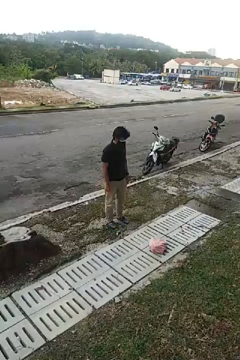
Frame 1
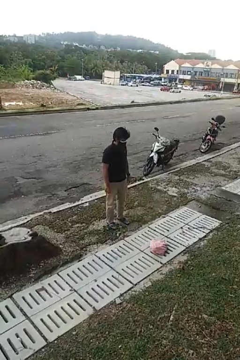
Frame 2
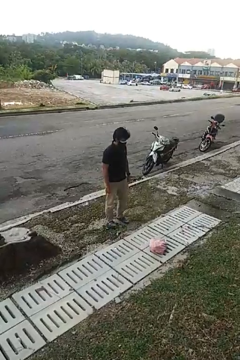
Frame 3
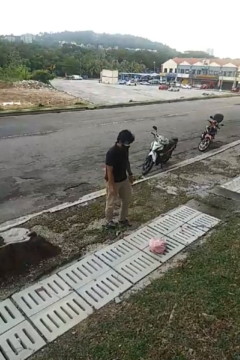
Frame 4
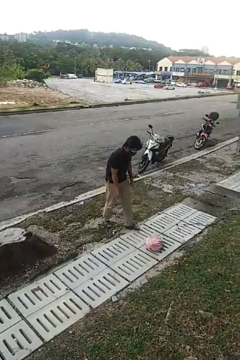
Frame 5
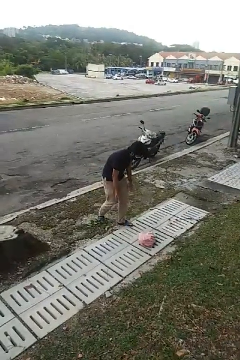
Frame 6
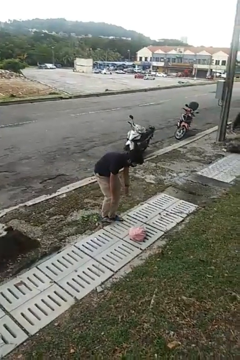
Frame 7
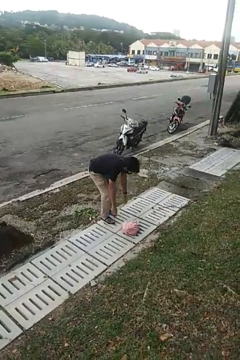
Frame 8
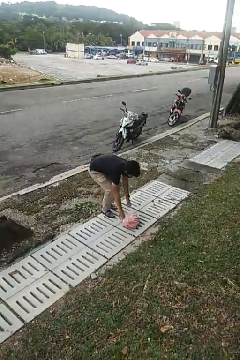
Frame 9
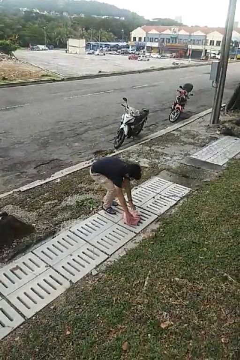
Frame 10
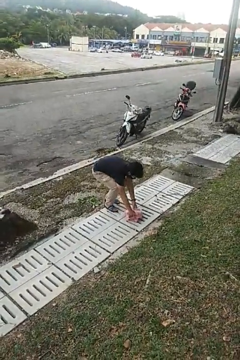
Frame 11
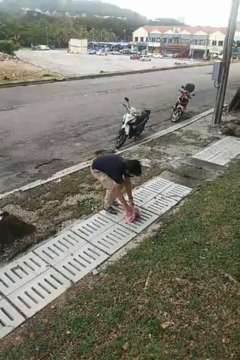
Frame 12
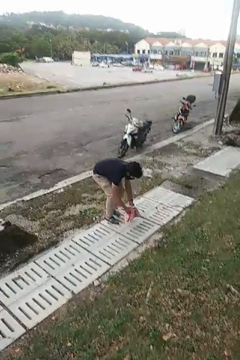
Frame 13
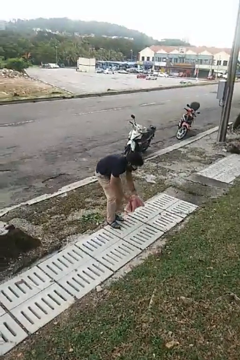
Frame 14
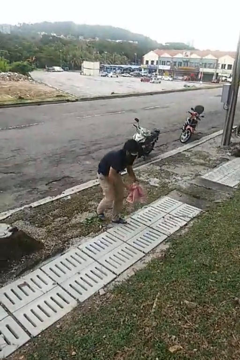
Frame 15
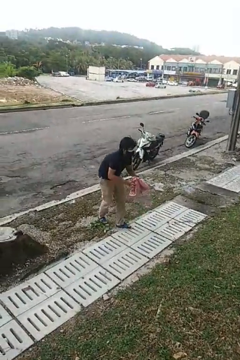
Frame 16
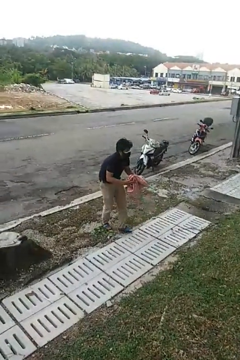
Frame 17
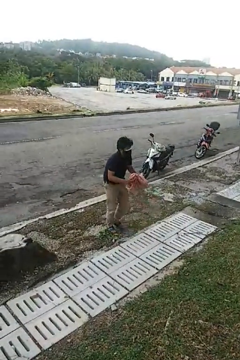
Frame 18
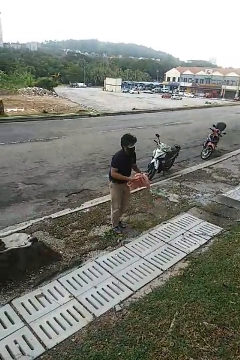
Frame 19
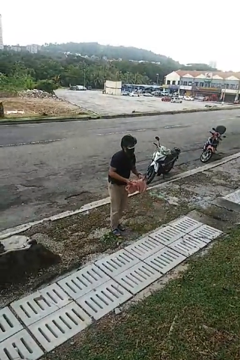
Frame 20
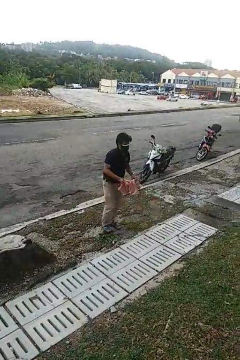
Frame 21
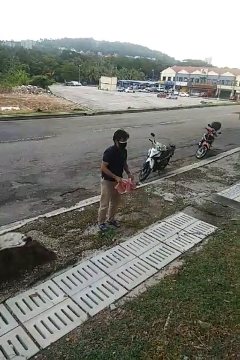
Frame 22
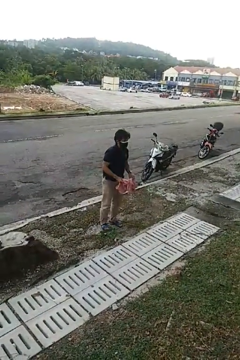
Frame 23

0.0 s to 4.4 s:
person picks up object from floor

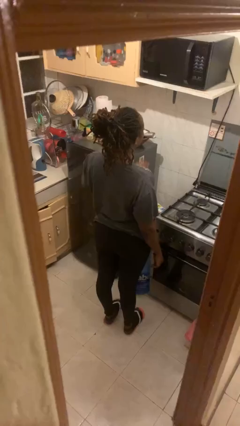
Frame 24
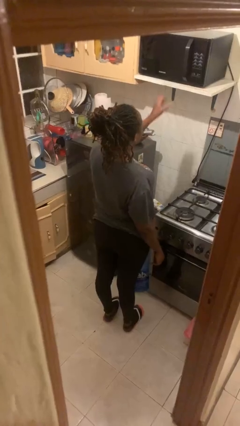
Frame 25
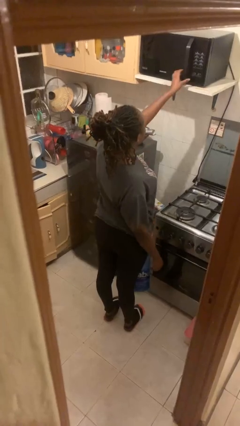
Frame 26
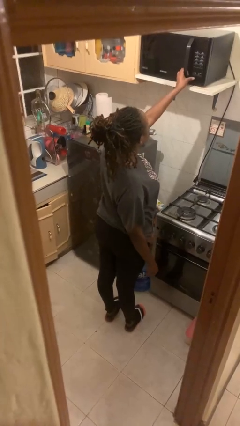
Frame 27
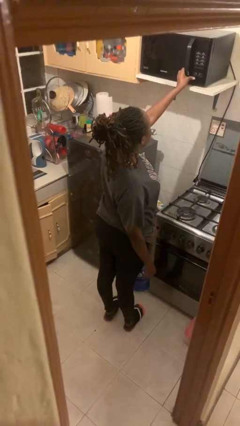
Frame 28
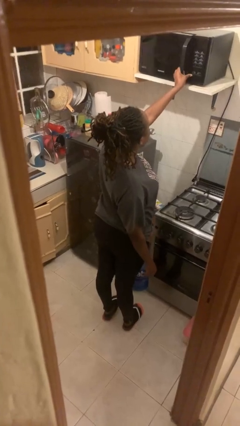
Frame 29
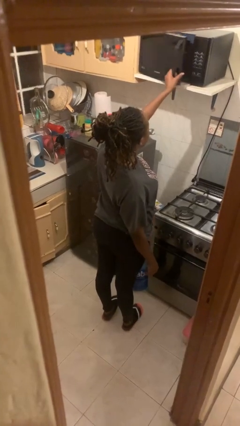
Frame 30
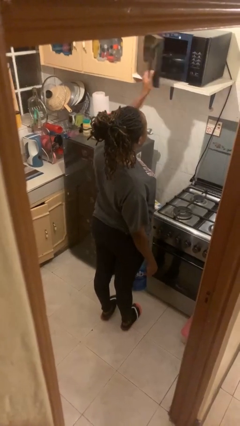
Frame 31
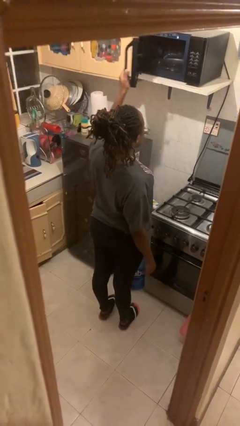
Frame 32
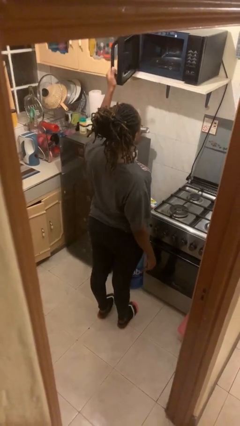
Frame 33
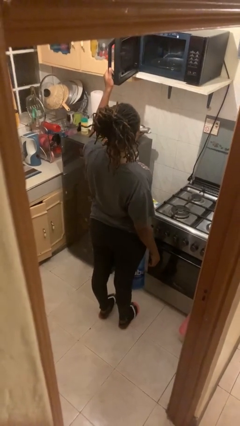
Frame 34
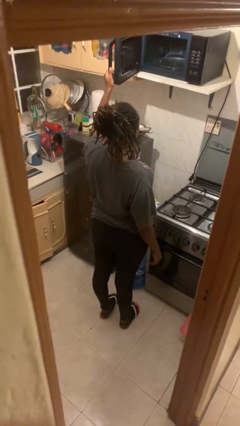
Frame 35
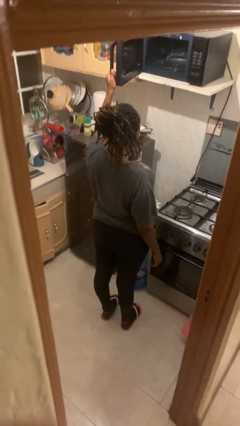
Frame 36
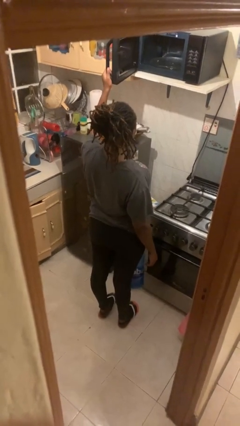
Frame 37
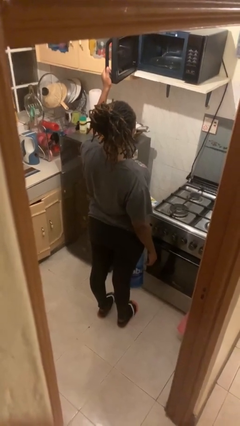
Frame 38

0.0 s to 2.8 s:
person opens microwave

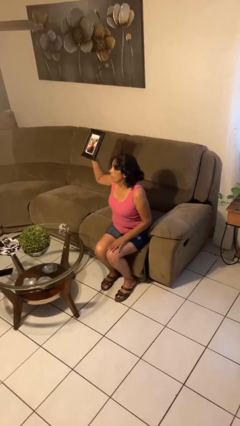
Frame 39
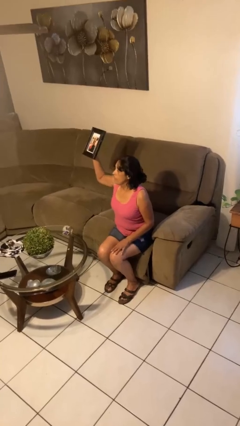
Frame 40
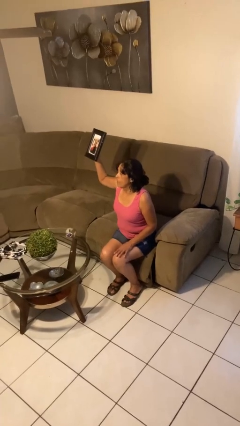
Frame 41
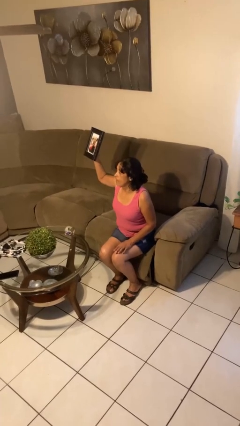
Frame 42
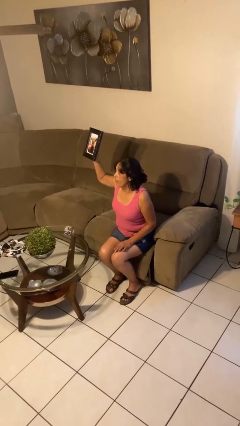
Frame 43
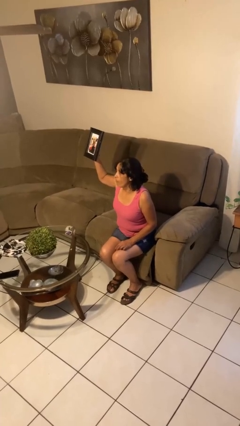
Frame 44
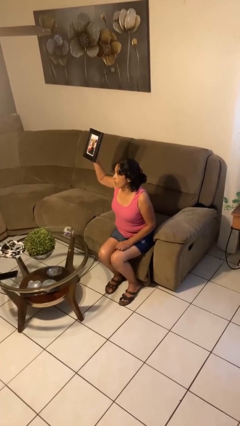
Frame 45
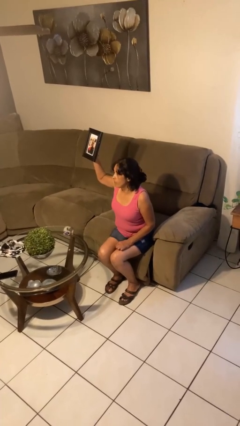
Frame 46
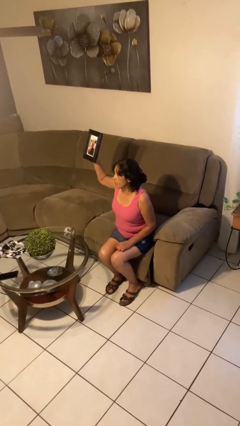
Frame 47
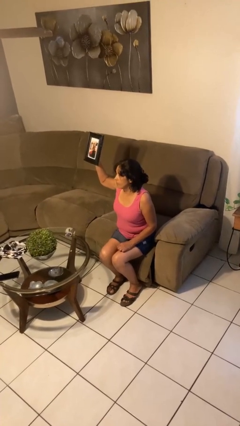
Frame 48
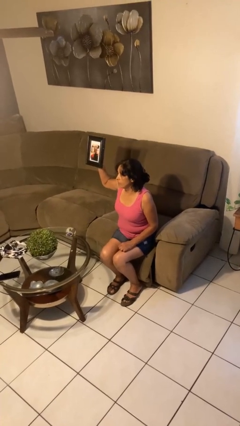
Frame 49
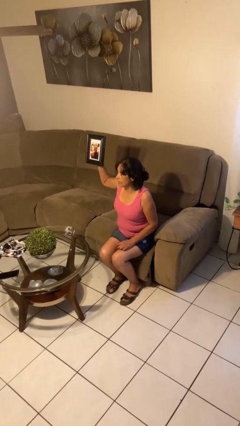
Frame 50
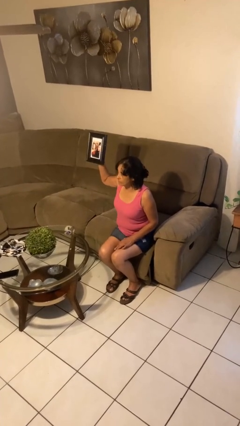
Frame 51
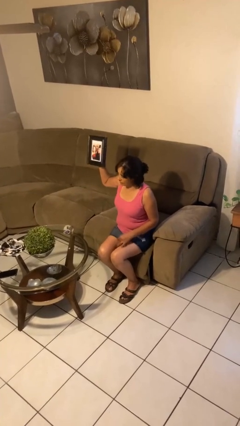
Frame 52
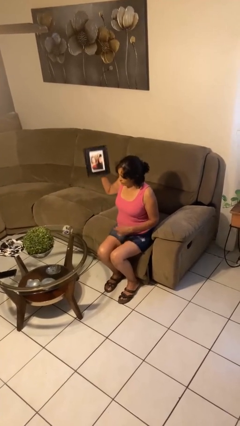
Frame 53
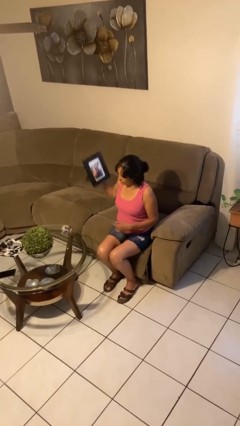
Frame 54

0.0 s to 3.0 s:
person holds object above head

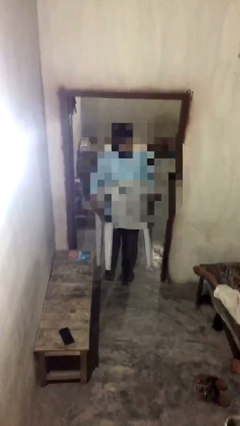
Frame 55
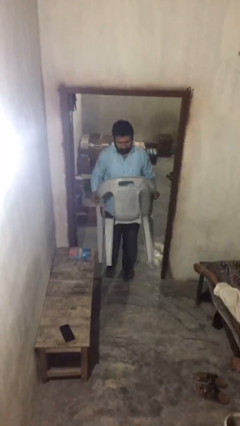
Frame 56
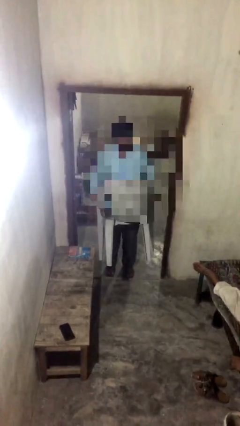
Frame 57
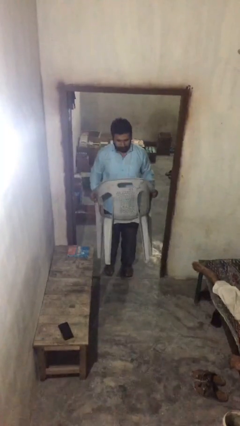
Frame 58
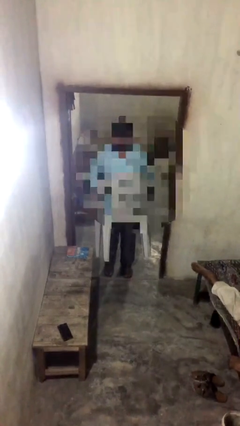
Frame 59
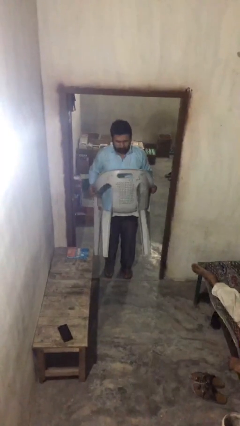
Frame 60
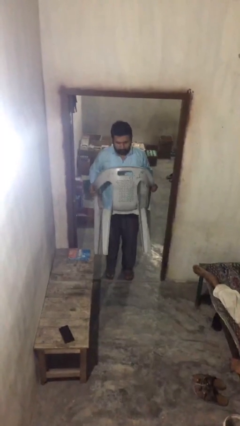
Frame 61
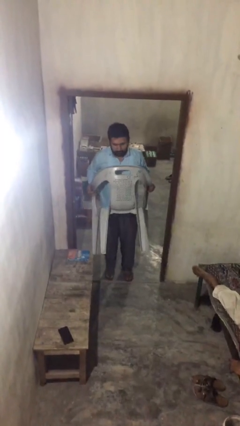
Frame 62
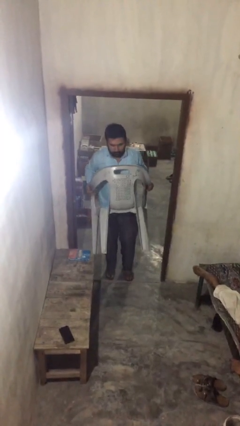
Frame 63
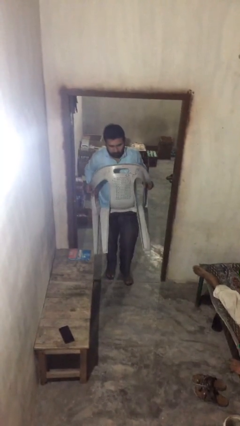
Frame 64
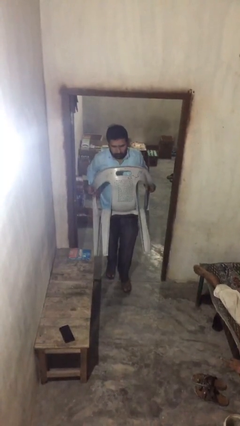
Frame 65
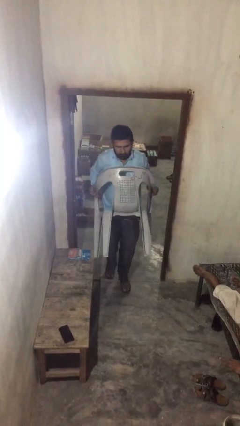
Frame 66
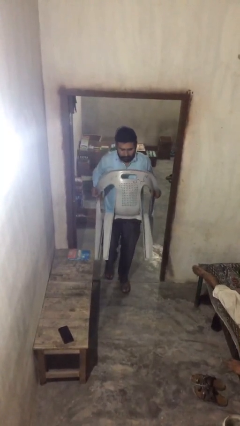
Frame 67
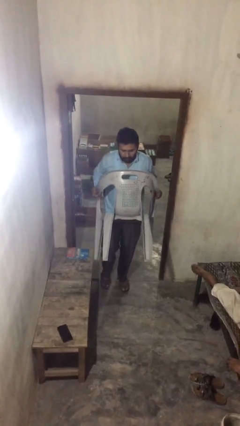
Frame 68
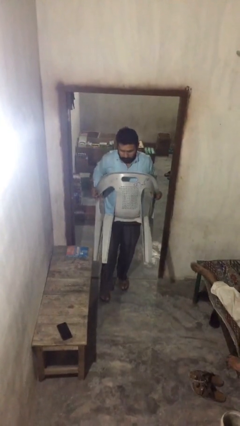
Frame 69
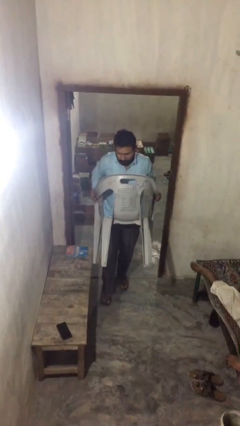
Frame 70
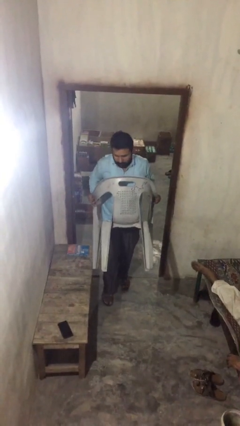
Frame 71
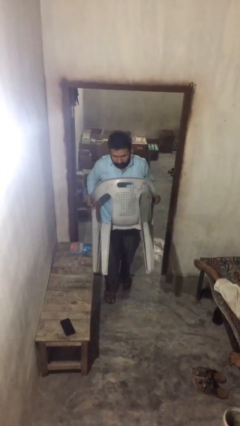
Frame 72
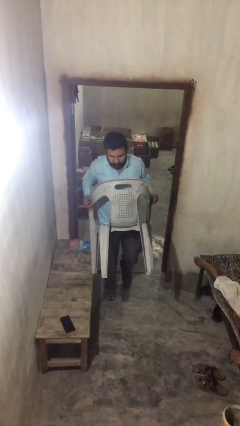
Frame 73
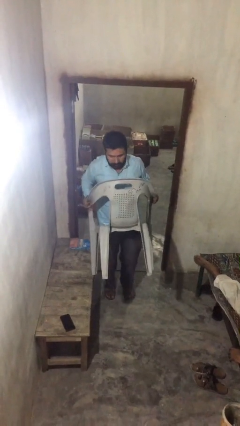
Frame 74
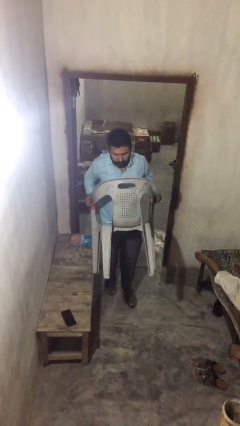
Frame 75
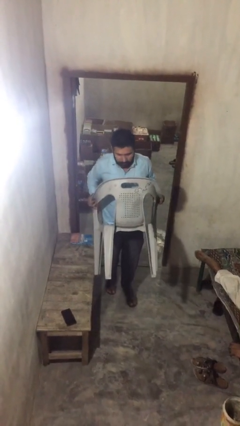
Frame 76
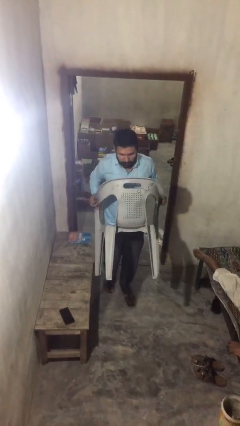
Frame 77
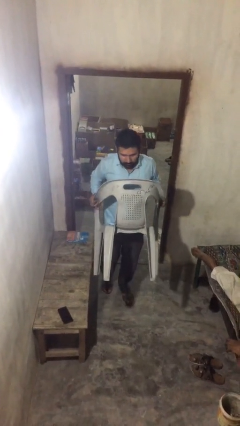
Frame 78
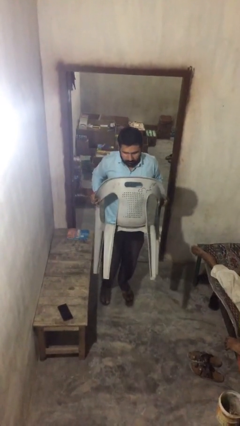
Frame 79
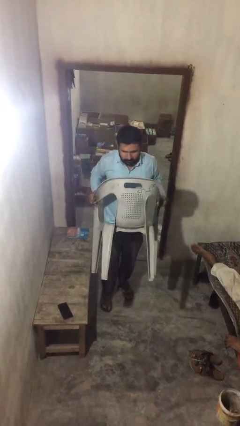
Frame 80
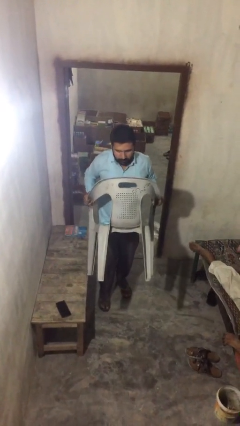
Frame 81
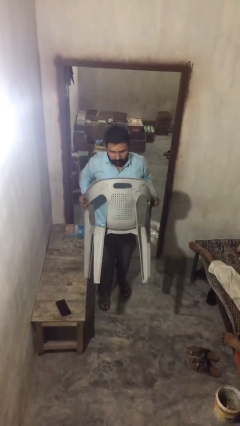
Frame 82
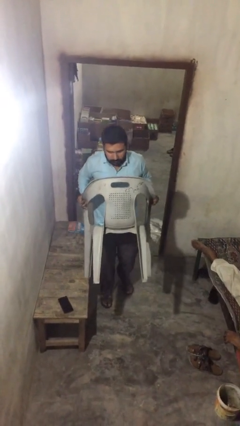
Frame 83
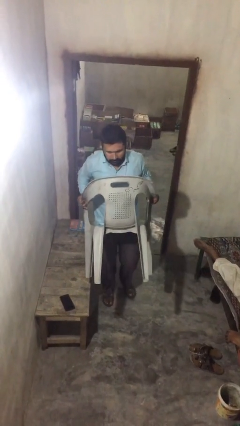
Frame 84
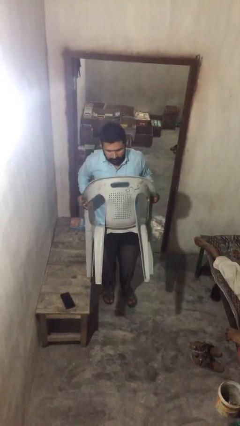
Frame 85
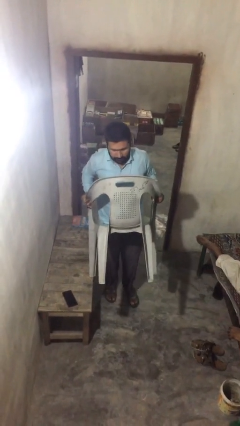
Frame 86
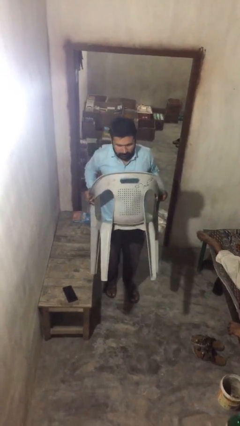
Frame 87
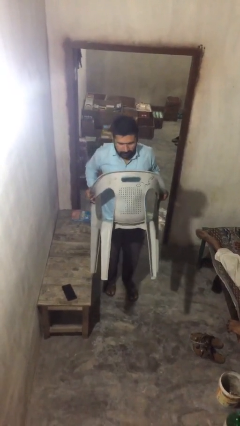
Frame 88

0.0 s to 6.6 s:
person reads document

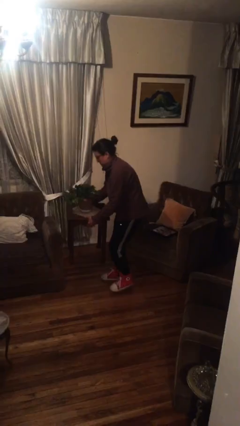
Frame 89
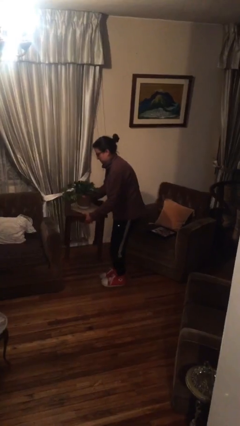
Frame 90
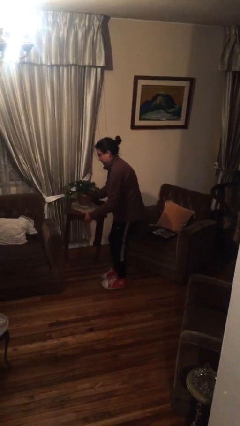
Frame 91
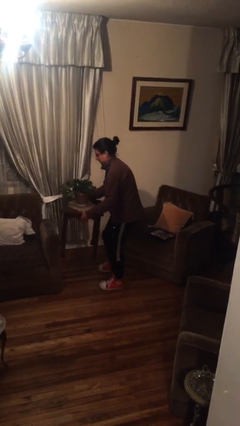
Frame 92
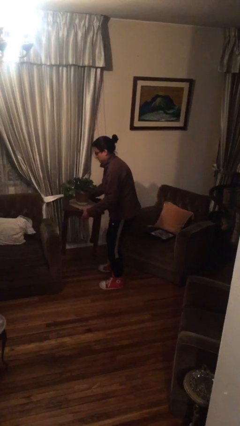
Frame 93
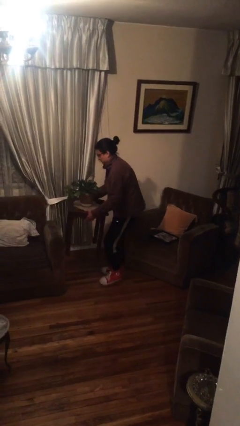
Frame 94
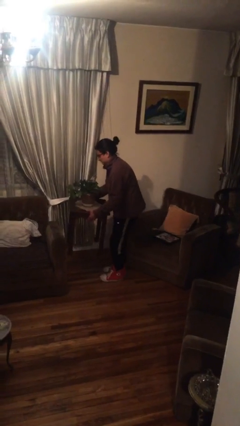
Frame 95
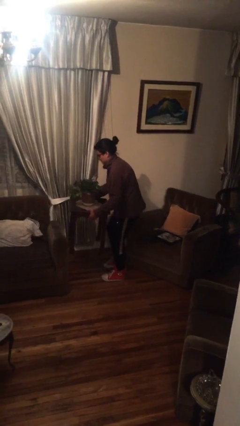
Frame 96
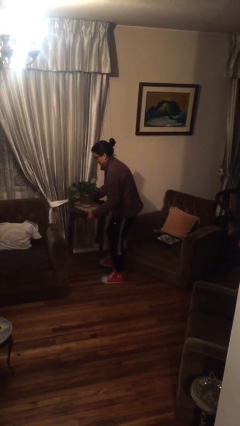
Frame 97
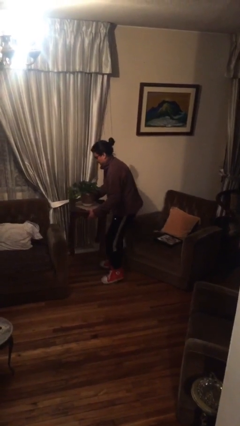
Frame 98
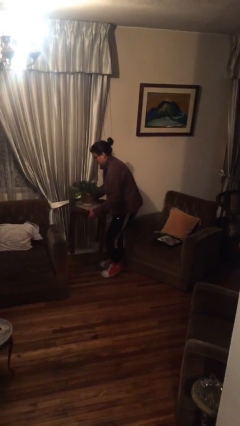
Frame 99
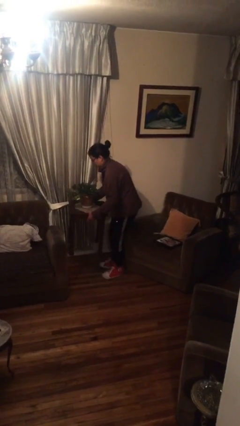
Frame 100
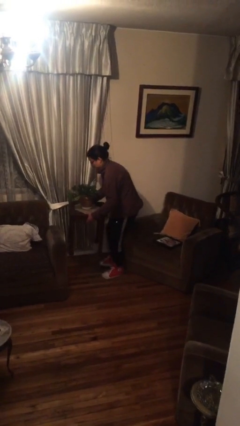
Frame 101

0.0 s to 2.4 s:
person carries heavy object
